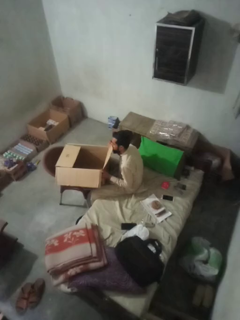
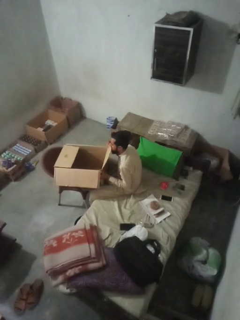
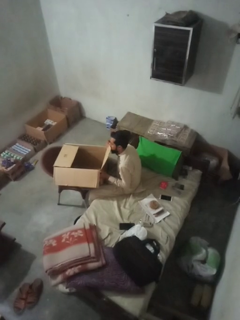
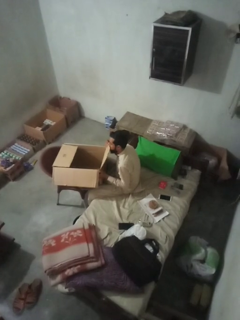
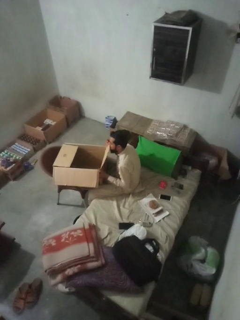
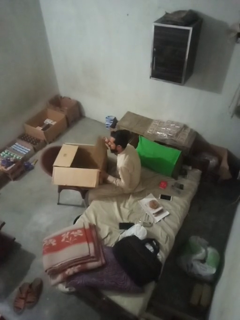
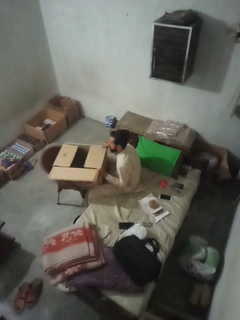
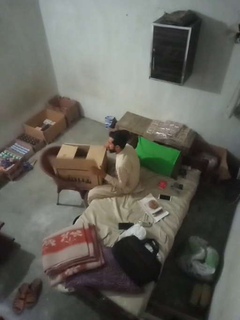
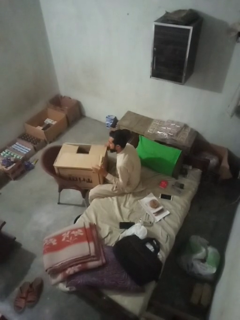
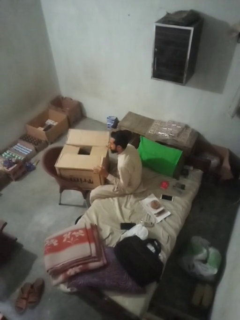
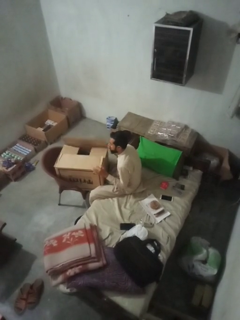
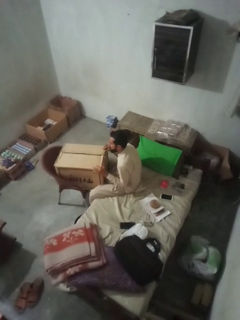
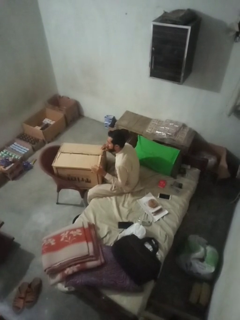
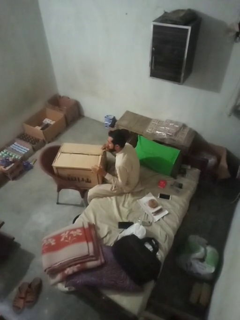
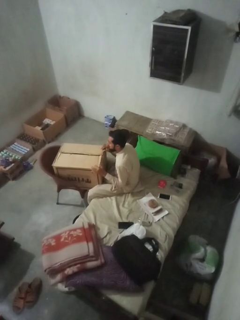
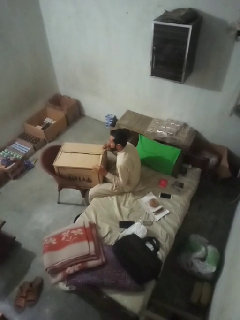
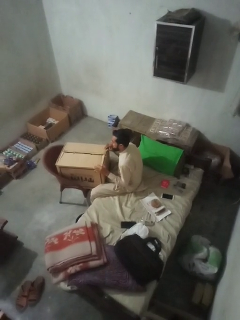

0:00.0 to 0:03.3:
person closes box

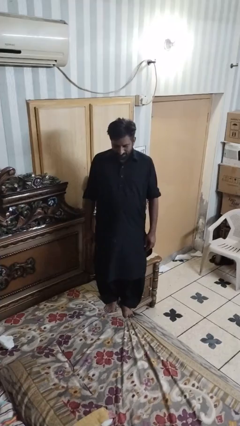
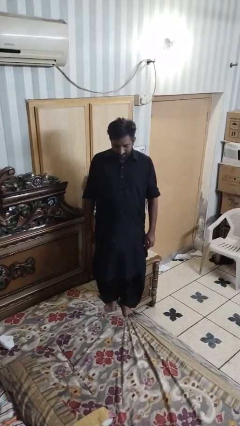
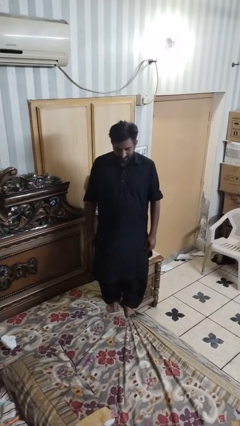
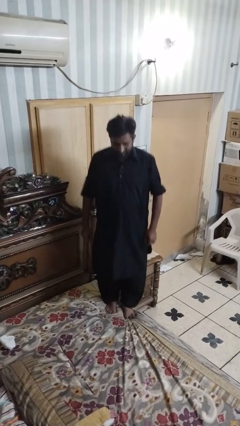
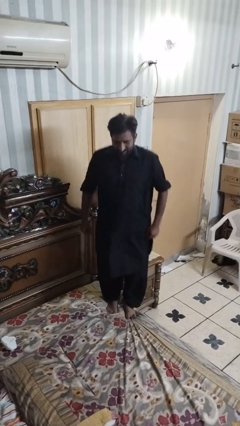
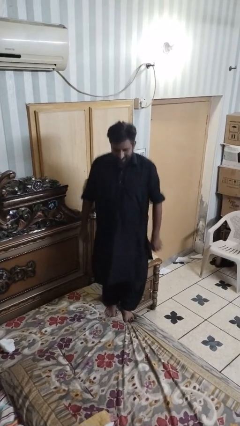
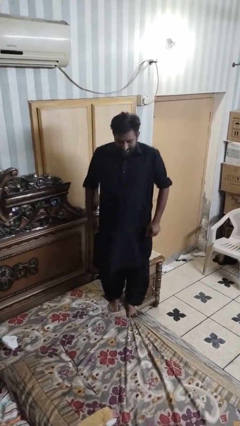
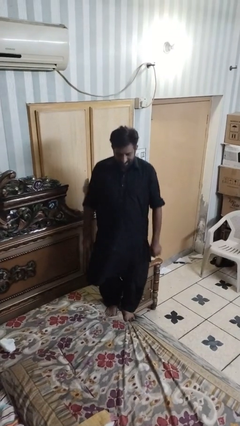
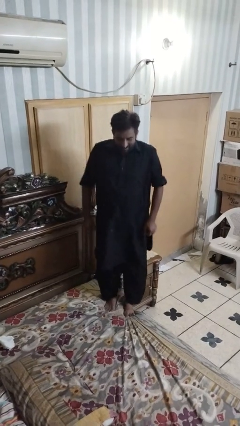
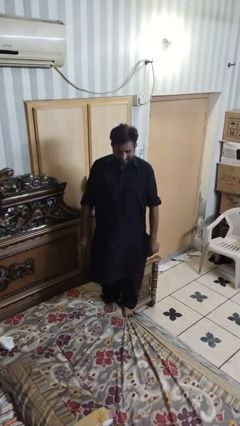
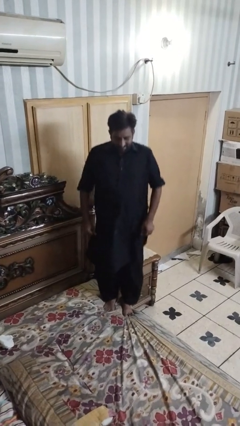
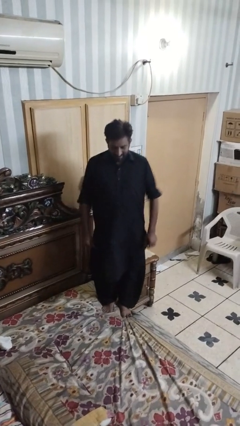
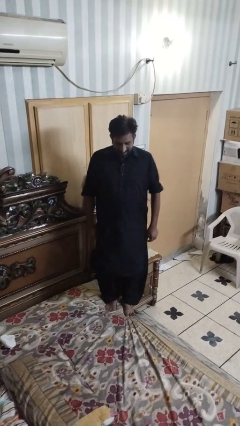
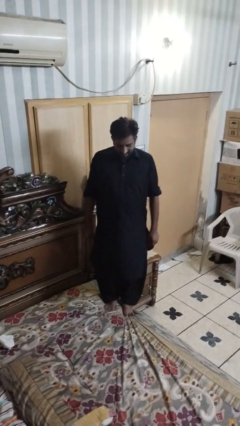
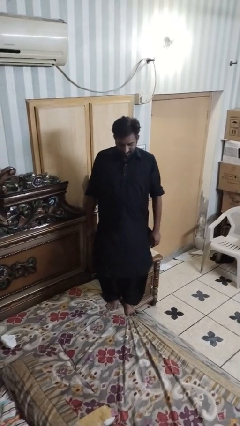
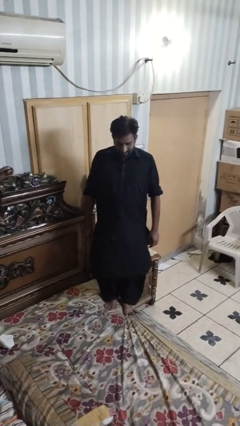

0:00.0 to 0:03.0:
person jumps on bed

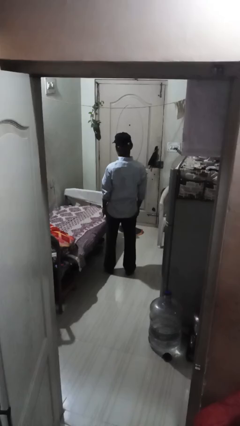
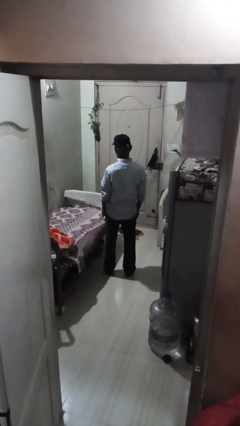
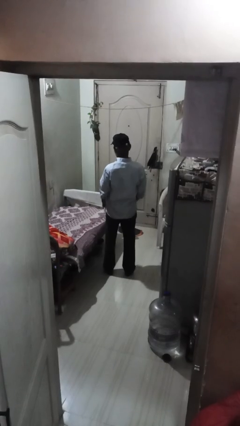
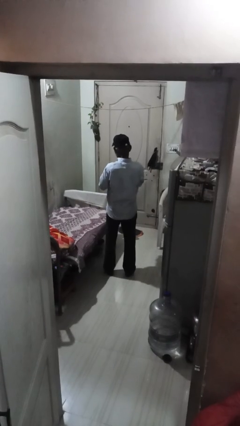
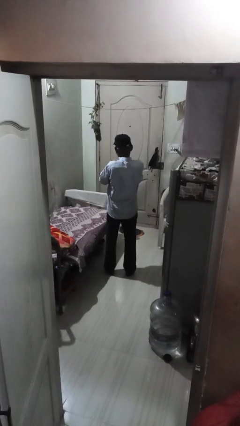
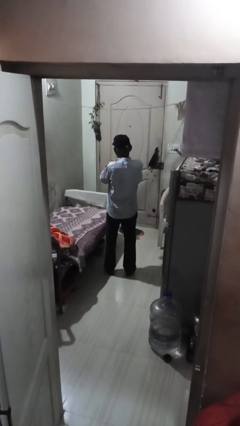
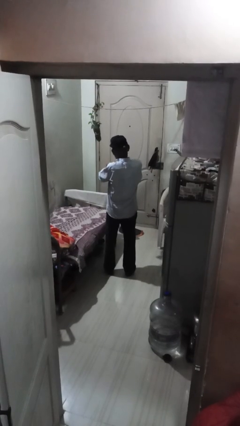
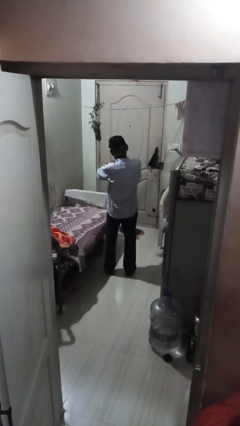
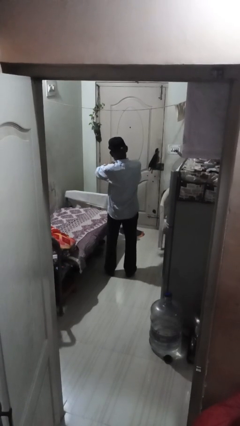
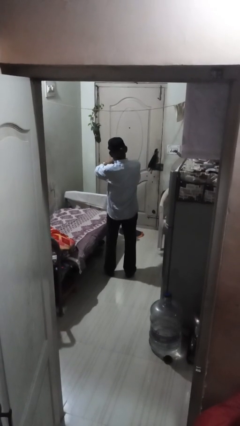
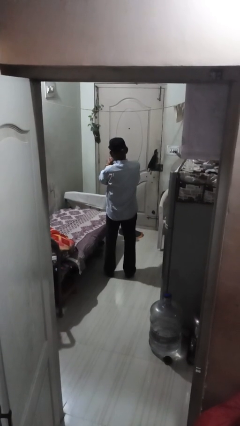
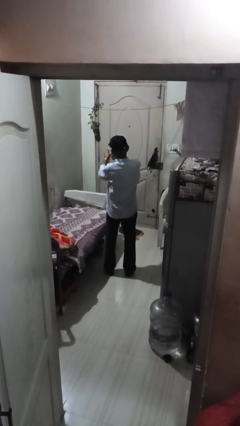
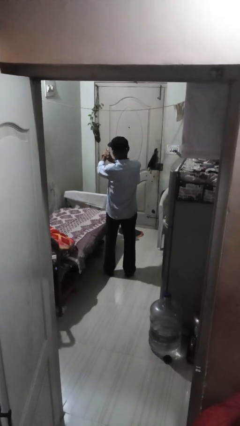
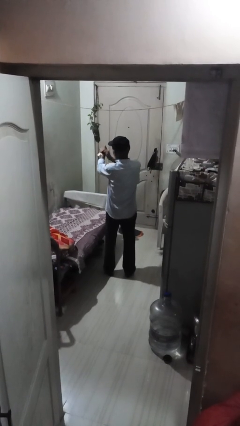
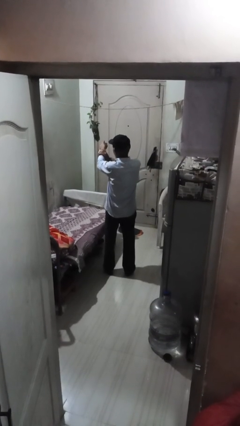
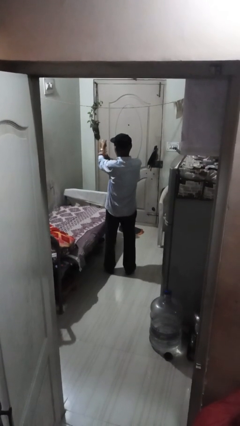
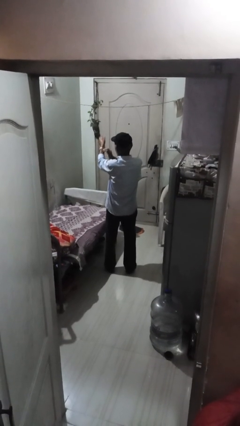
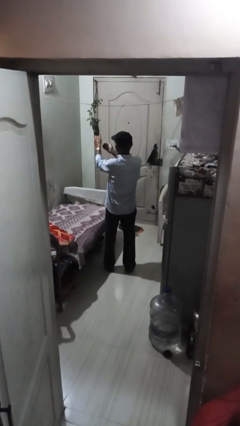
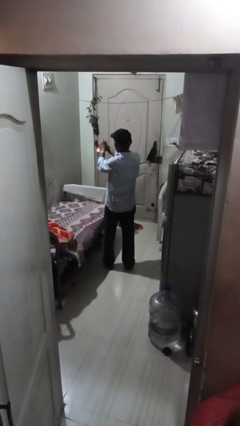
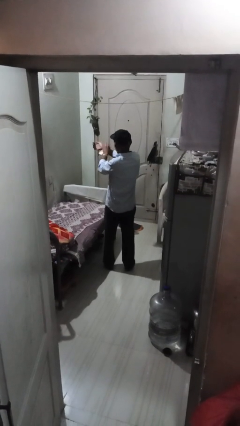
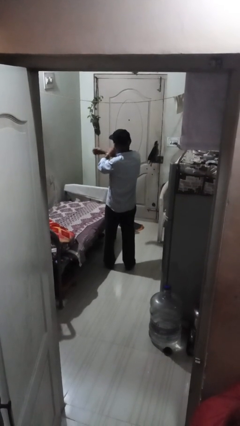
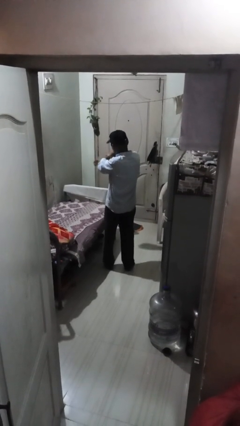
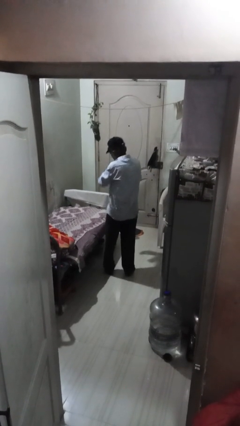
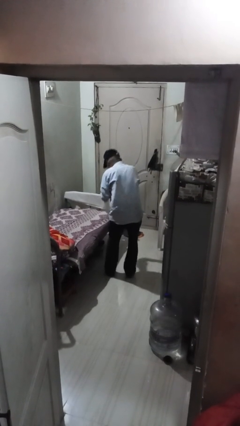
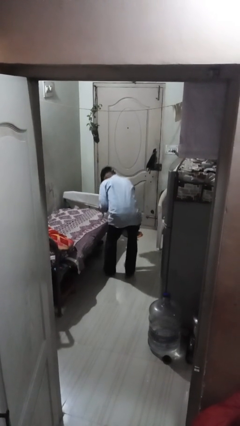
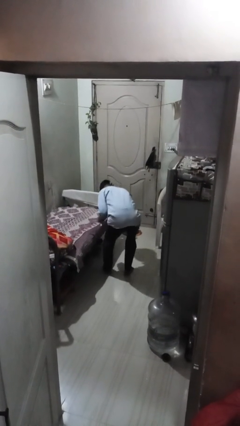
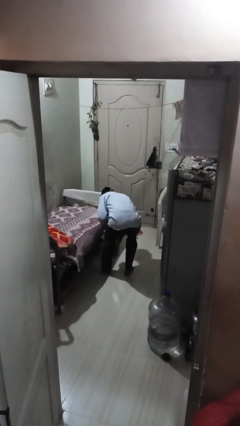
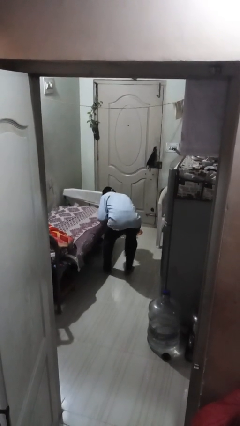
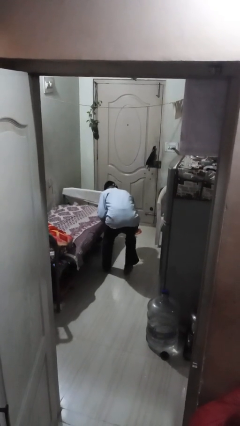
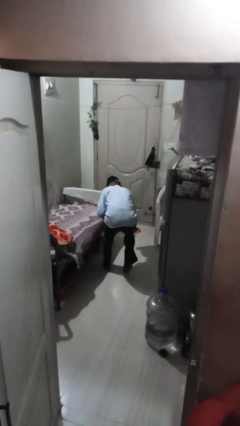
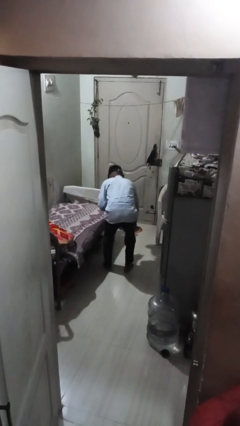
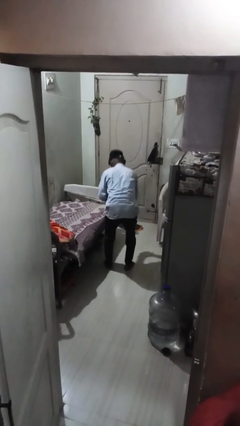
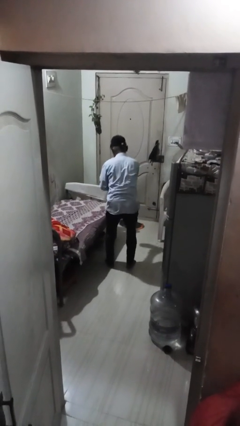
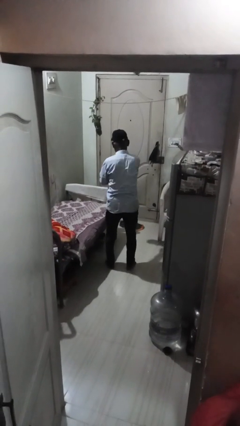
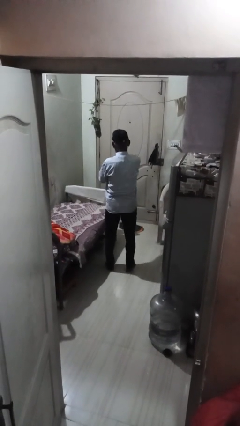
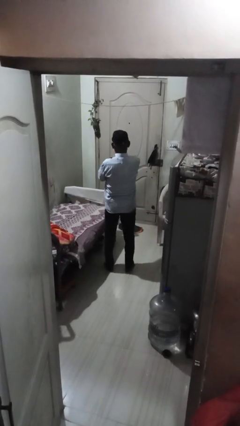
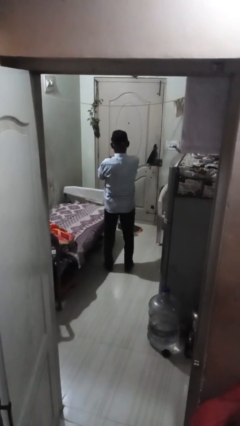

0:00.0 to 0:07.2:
person applies facial moisturizer

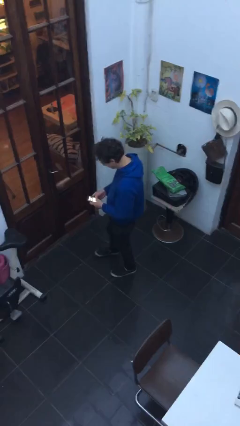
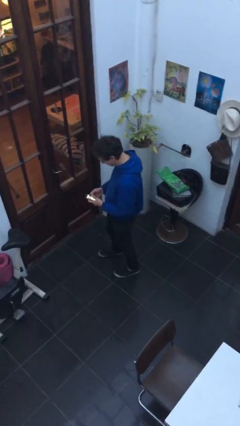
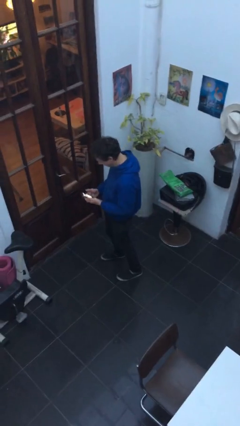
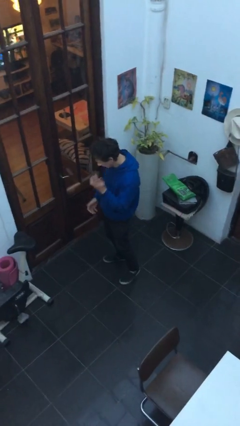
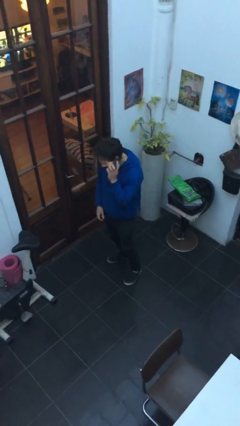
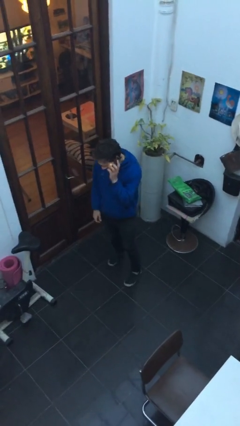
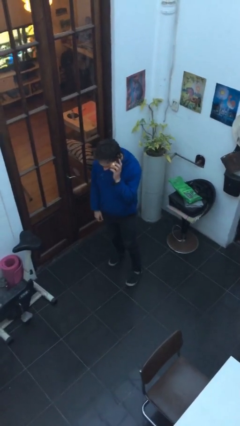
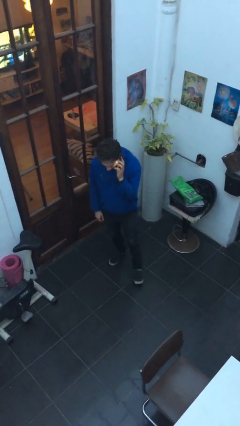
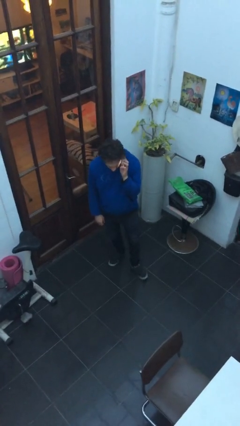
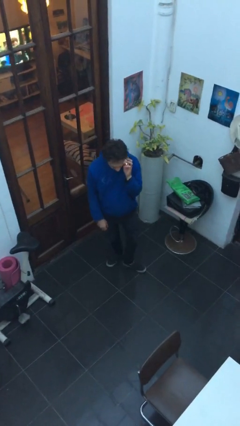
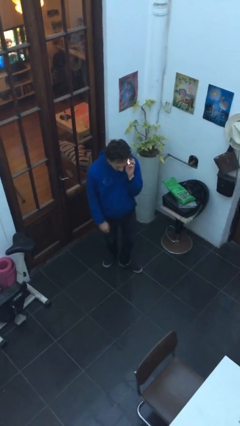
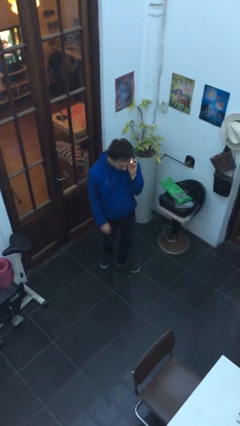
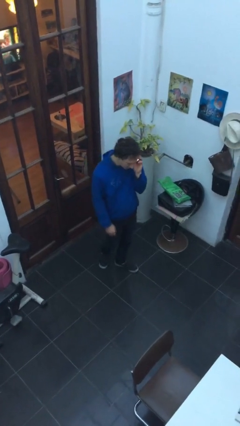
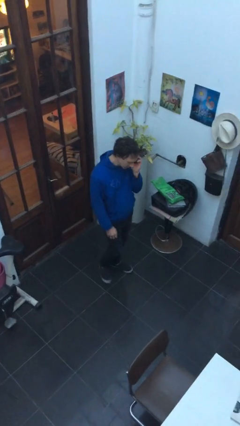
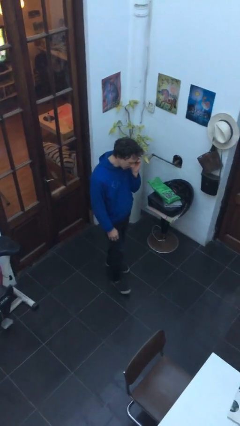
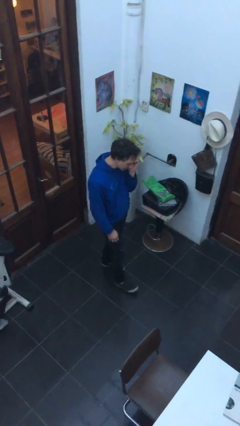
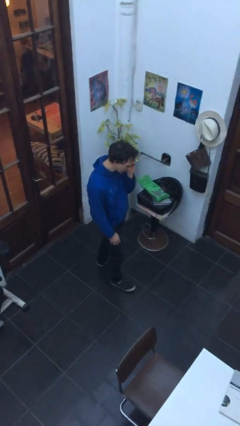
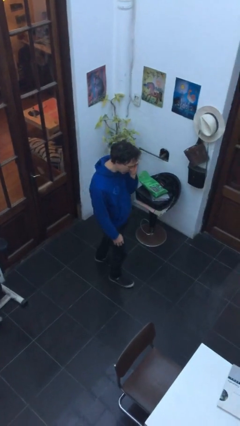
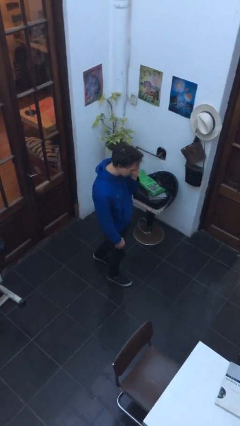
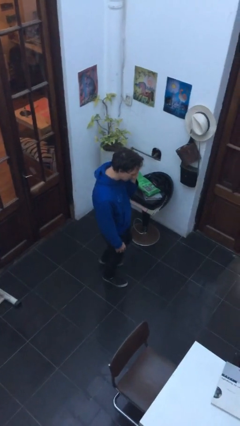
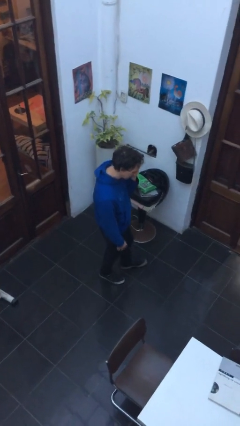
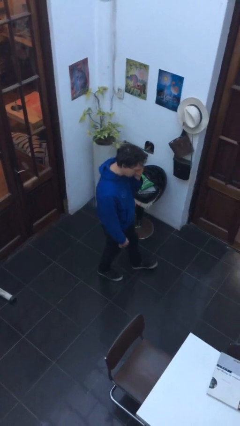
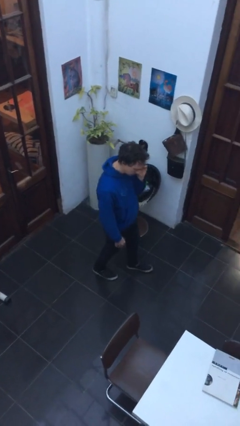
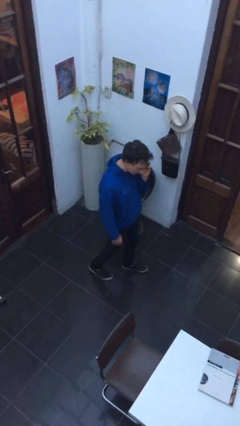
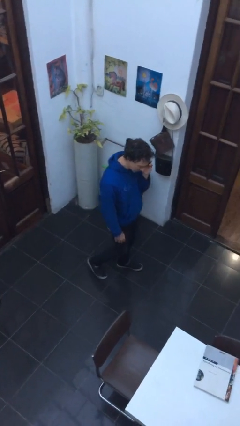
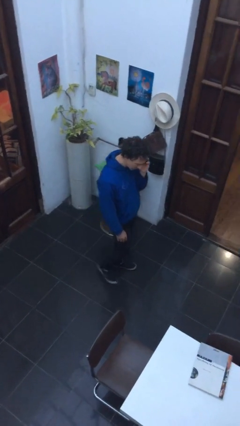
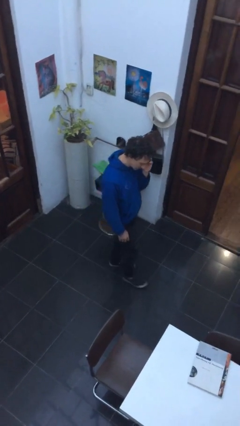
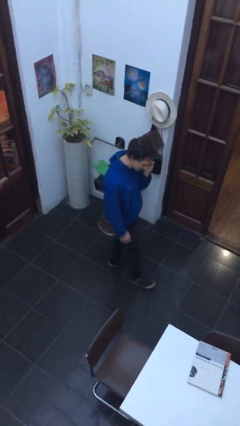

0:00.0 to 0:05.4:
person talks on phone
